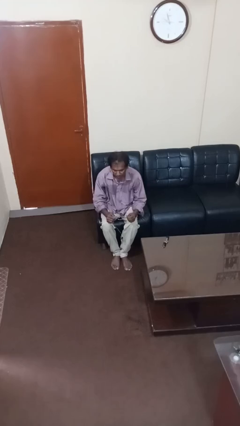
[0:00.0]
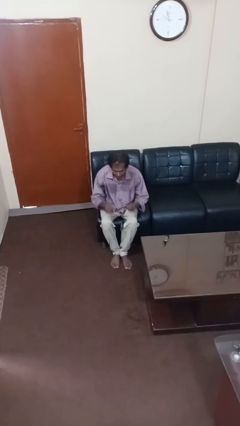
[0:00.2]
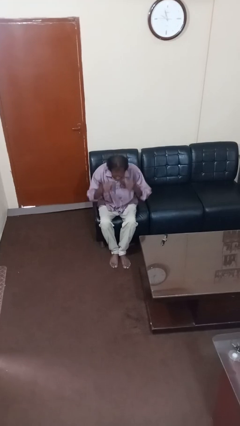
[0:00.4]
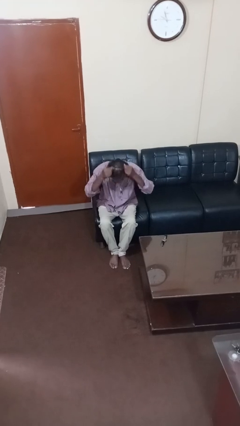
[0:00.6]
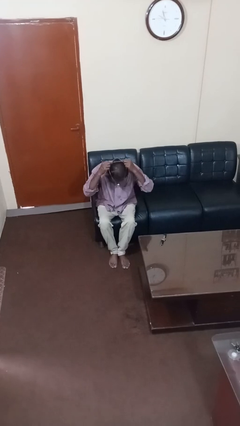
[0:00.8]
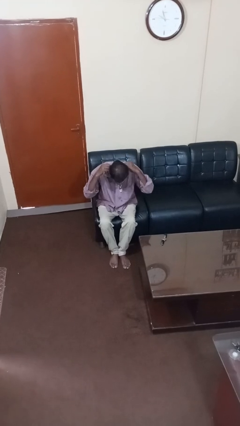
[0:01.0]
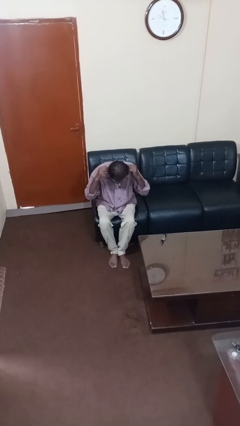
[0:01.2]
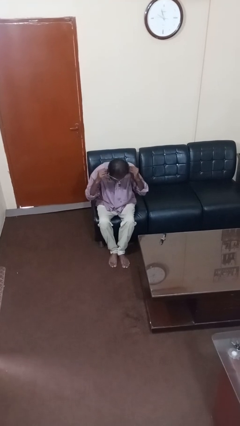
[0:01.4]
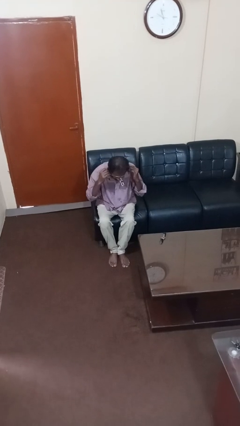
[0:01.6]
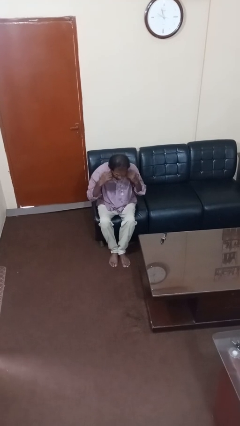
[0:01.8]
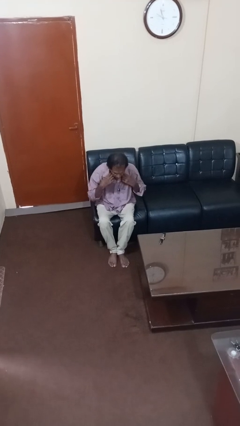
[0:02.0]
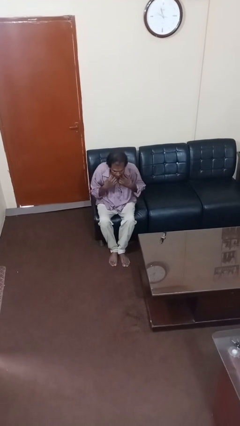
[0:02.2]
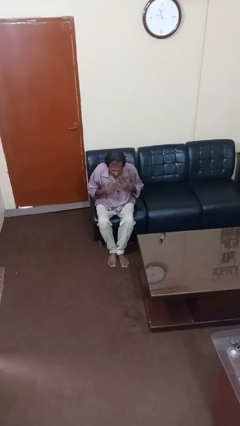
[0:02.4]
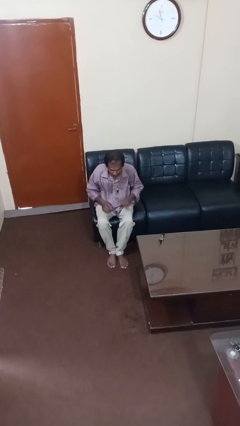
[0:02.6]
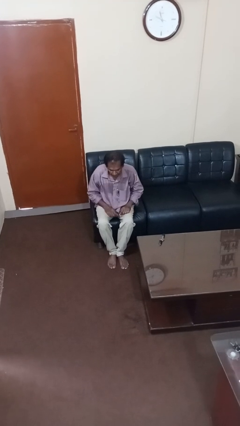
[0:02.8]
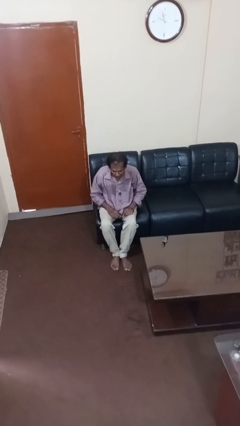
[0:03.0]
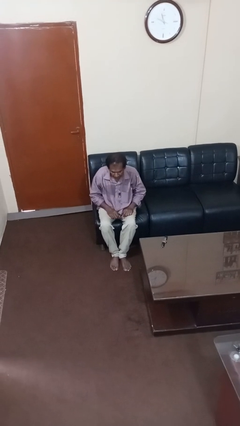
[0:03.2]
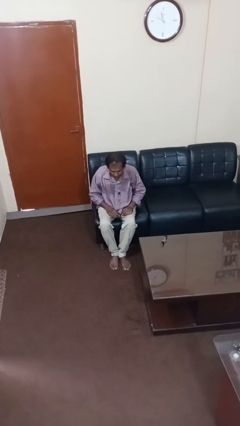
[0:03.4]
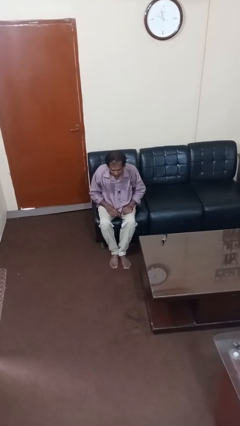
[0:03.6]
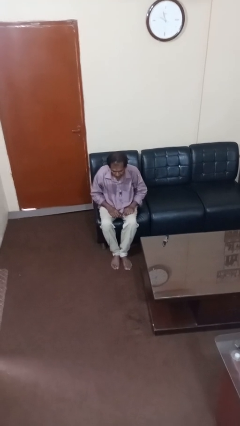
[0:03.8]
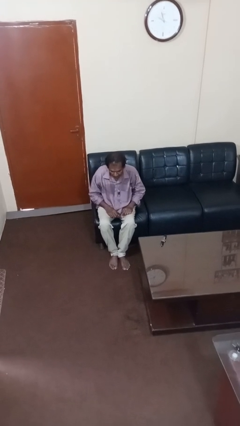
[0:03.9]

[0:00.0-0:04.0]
person puts on necklace

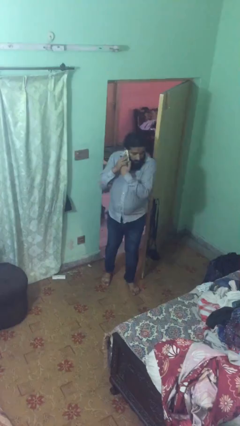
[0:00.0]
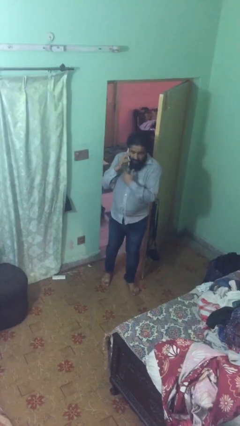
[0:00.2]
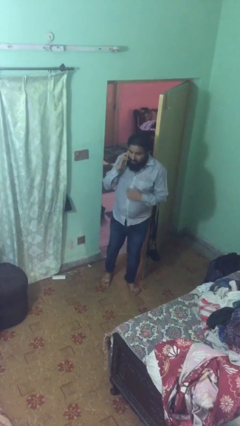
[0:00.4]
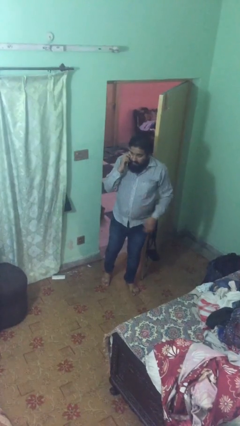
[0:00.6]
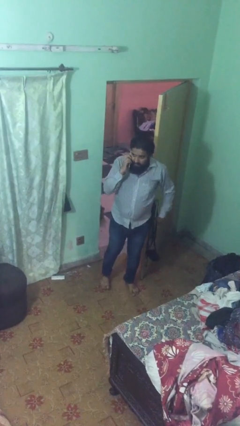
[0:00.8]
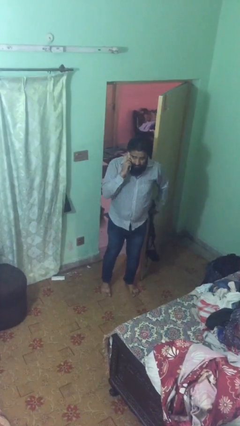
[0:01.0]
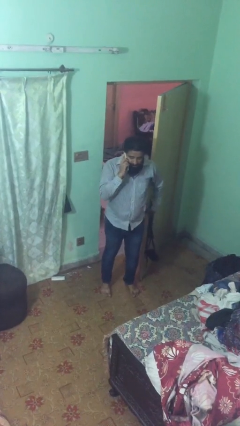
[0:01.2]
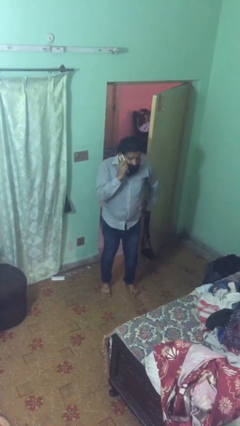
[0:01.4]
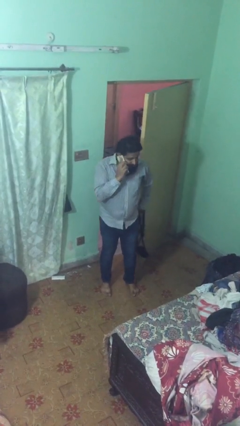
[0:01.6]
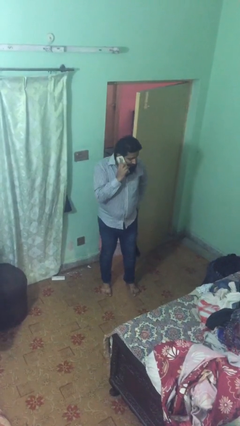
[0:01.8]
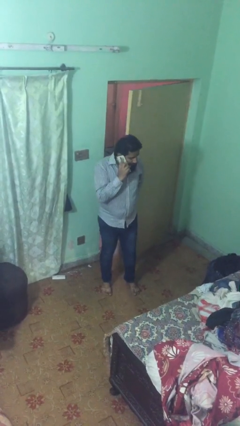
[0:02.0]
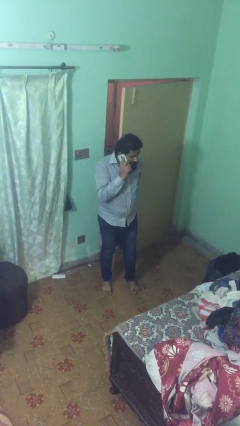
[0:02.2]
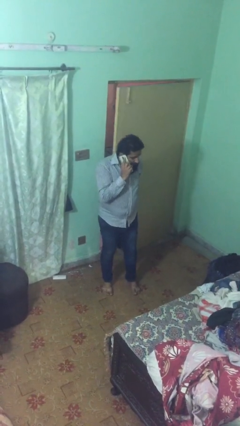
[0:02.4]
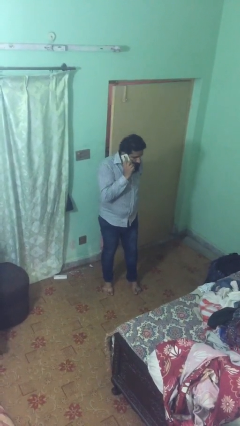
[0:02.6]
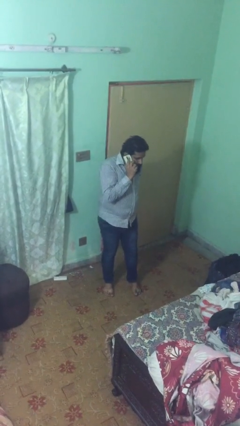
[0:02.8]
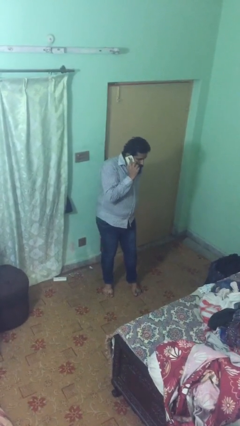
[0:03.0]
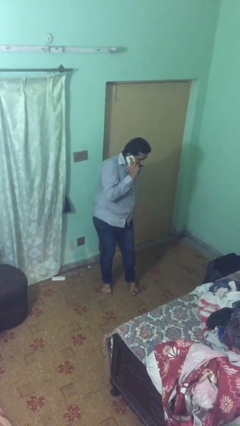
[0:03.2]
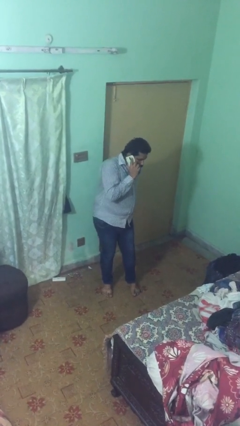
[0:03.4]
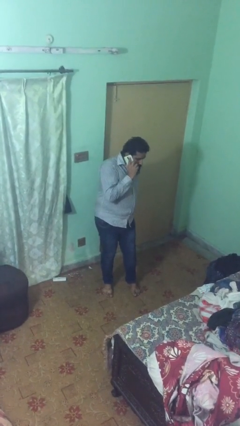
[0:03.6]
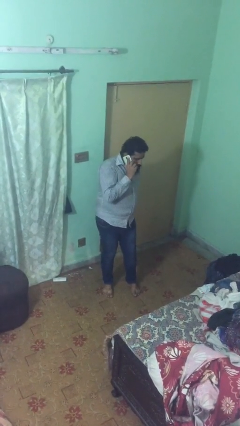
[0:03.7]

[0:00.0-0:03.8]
person closes facility door

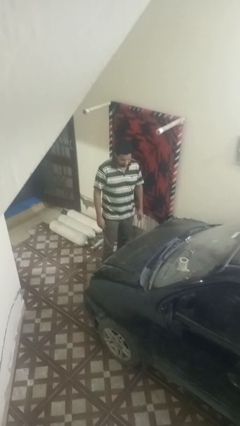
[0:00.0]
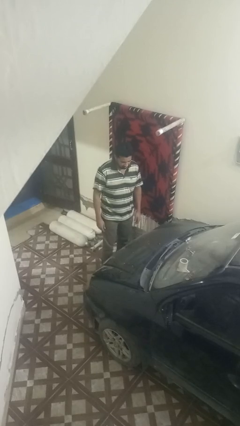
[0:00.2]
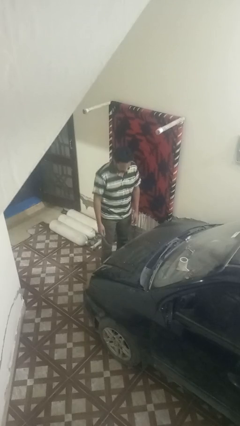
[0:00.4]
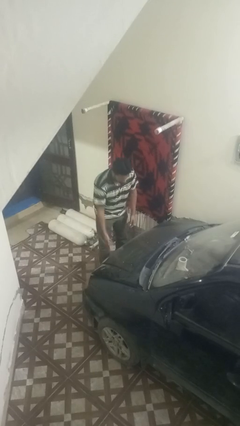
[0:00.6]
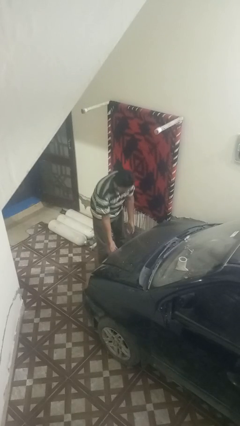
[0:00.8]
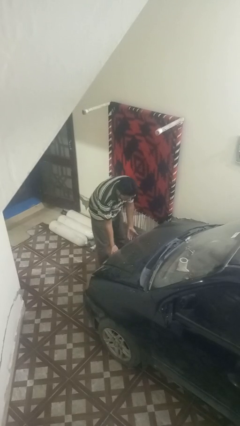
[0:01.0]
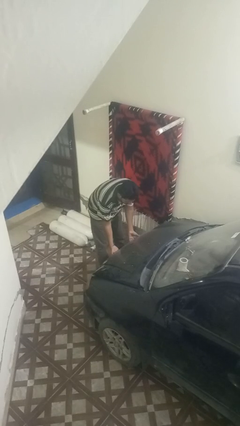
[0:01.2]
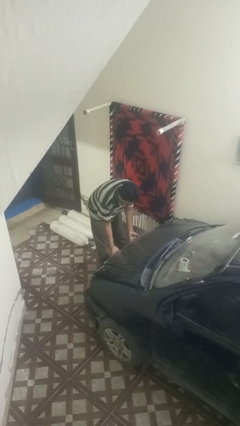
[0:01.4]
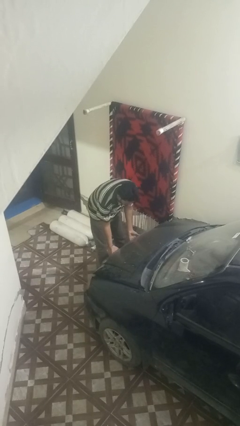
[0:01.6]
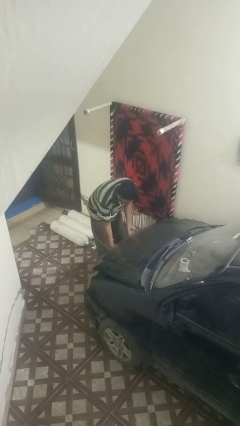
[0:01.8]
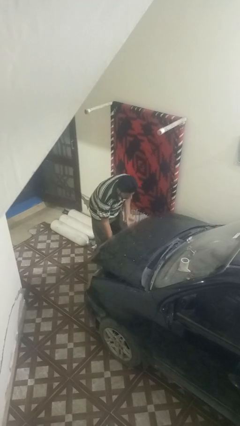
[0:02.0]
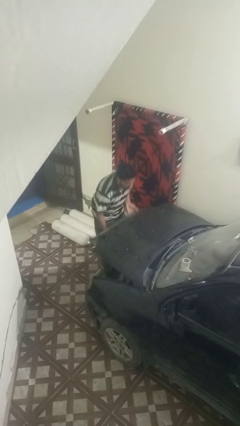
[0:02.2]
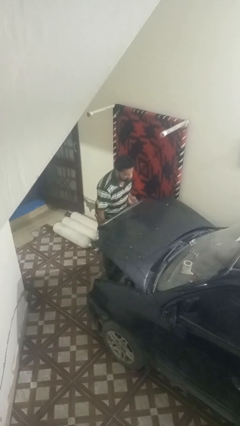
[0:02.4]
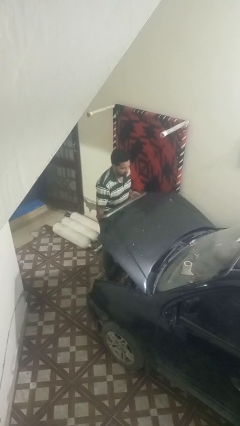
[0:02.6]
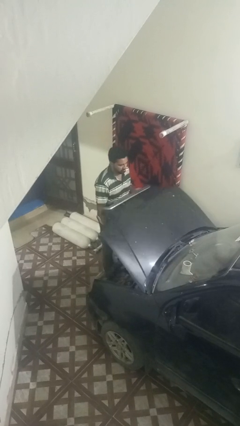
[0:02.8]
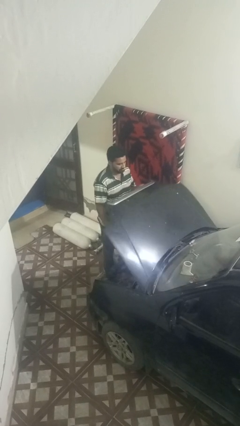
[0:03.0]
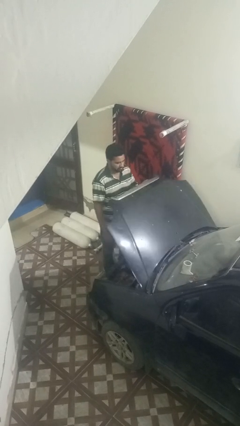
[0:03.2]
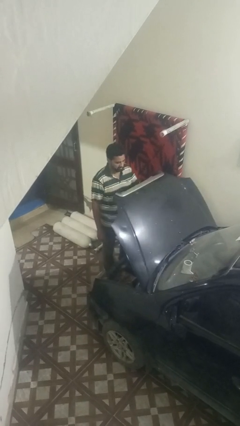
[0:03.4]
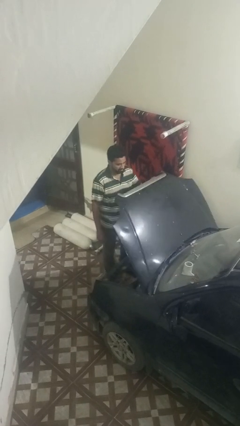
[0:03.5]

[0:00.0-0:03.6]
person opens car hood

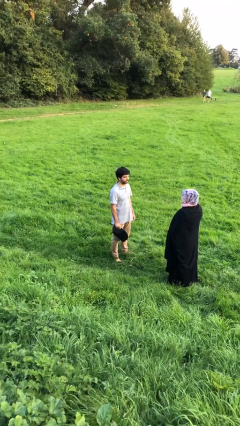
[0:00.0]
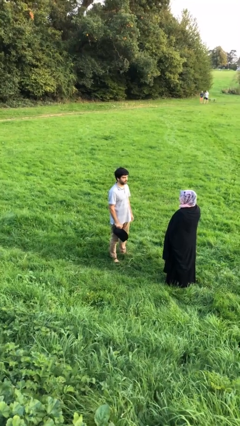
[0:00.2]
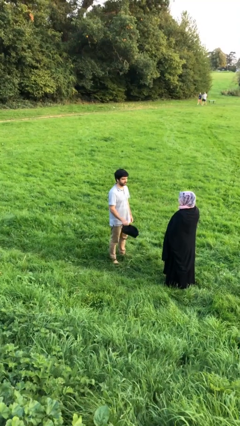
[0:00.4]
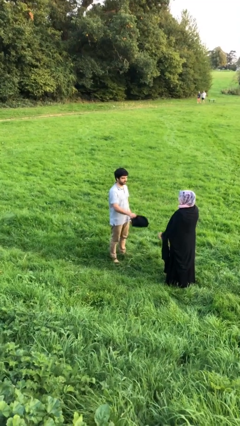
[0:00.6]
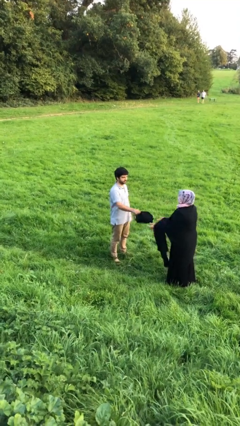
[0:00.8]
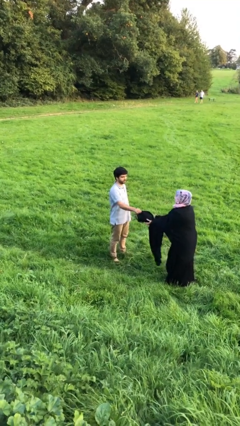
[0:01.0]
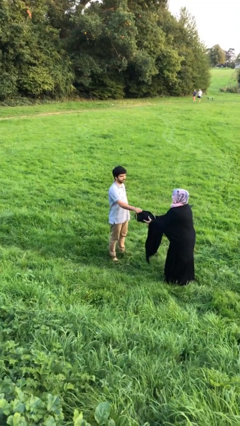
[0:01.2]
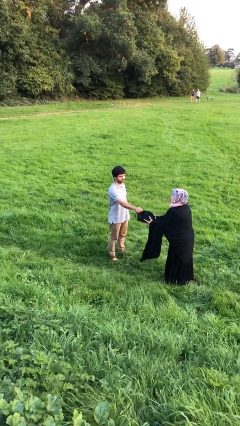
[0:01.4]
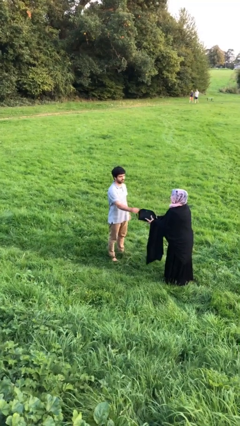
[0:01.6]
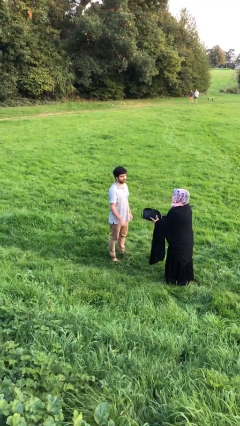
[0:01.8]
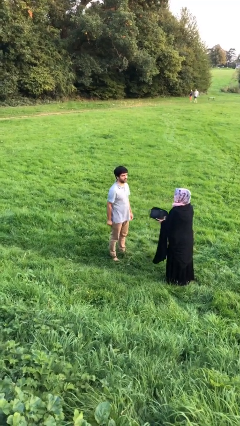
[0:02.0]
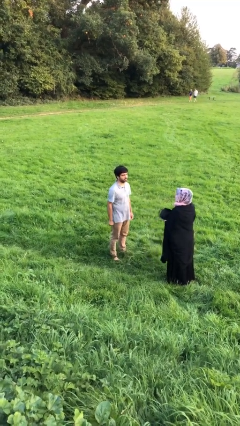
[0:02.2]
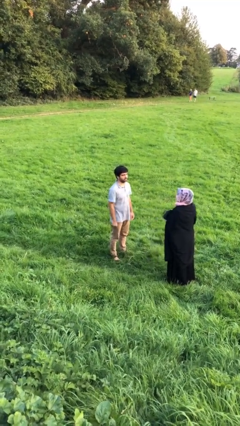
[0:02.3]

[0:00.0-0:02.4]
person transfers object to person

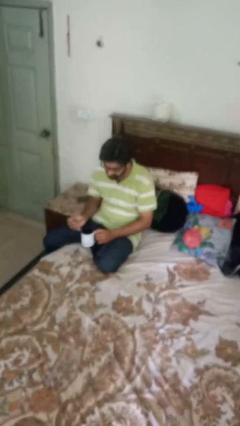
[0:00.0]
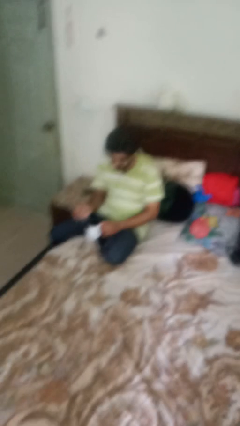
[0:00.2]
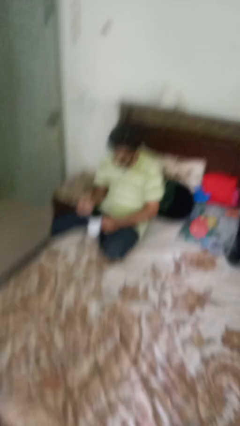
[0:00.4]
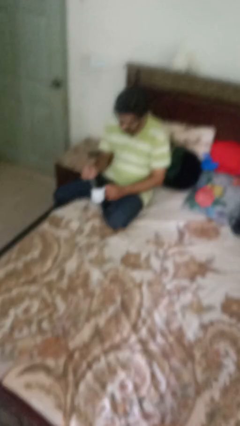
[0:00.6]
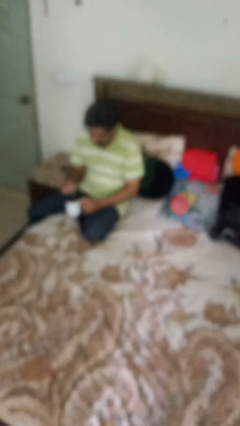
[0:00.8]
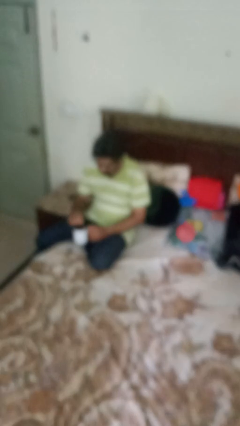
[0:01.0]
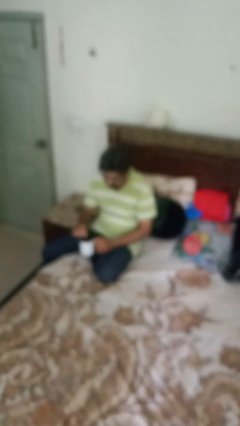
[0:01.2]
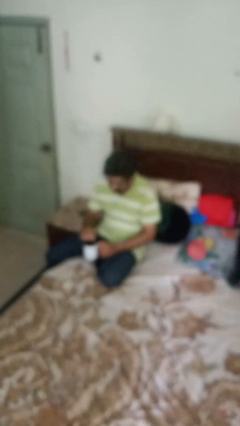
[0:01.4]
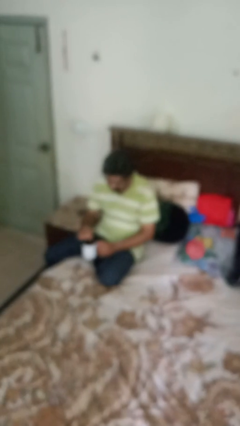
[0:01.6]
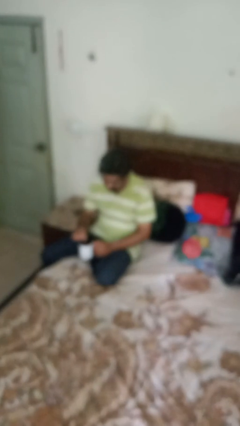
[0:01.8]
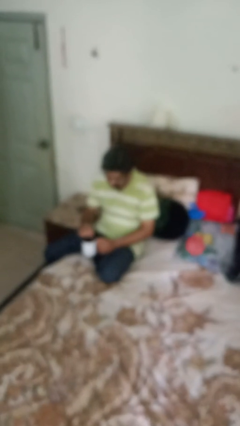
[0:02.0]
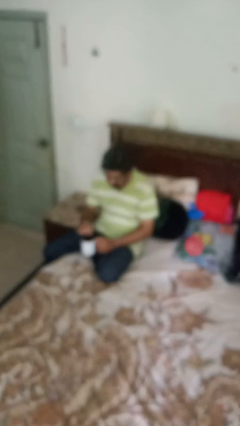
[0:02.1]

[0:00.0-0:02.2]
person stirs mug

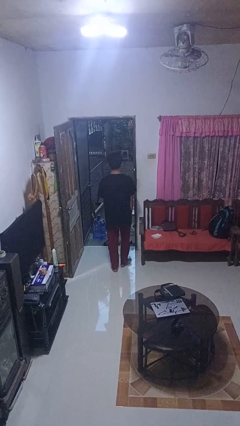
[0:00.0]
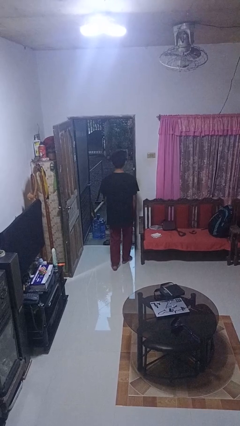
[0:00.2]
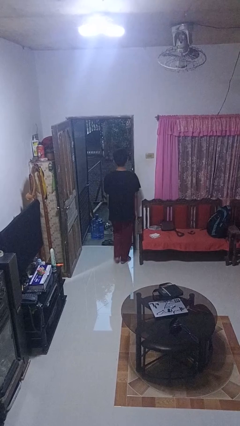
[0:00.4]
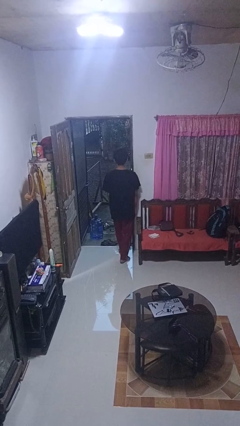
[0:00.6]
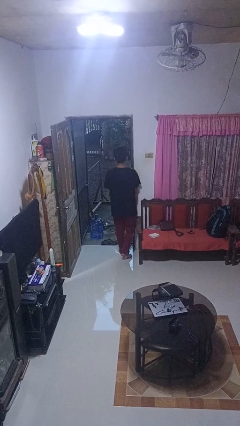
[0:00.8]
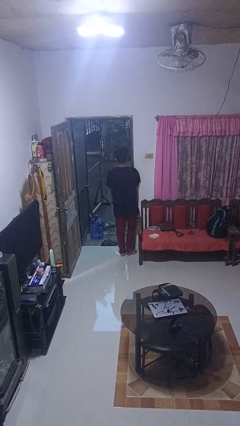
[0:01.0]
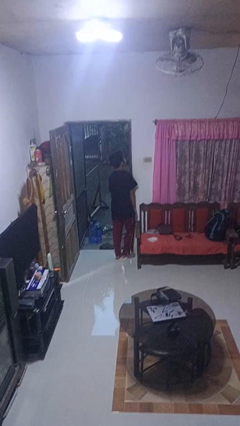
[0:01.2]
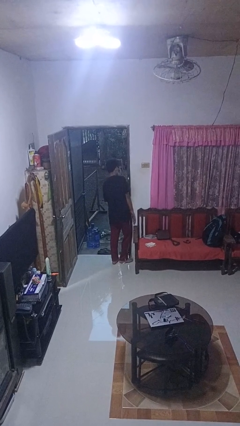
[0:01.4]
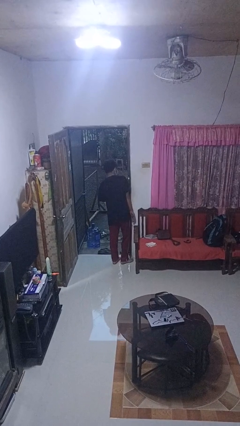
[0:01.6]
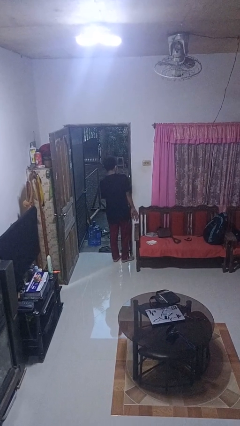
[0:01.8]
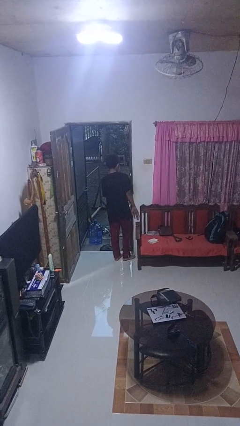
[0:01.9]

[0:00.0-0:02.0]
person bumps into wall
